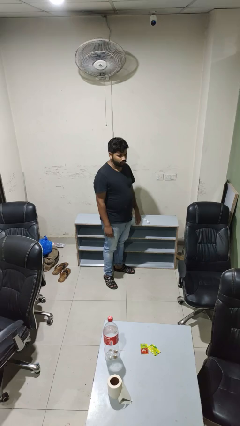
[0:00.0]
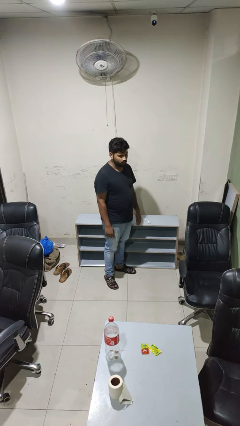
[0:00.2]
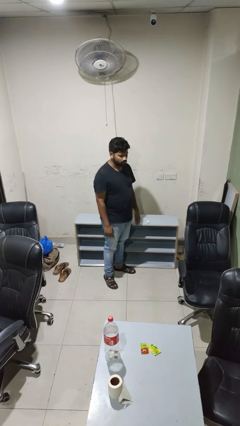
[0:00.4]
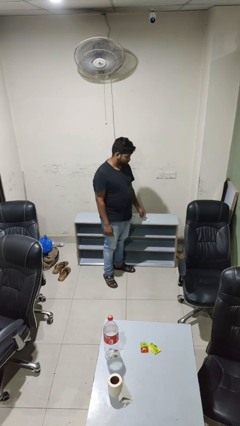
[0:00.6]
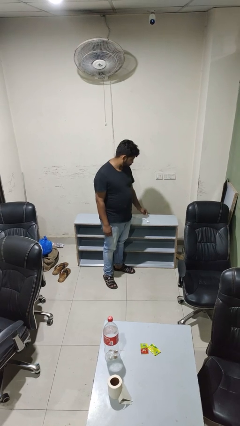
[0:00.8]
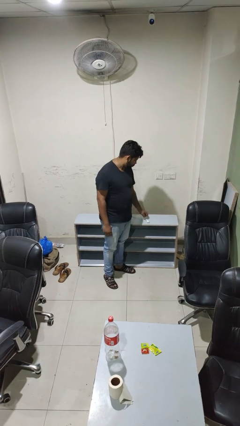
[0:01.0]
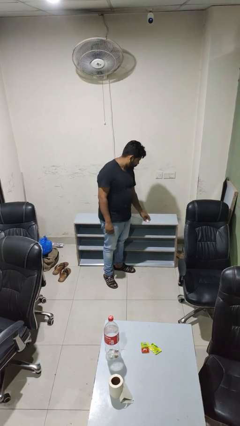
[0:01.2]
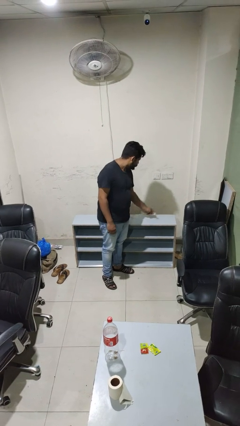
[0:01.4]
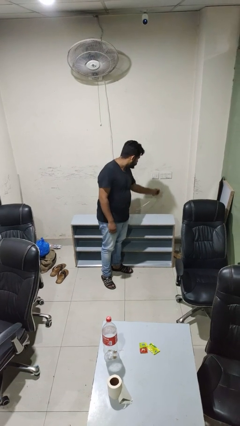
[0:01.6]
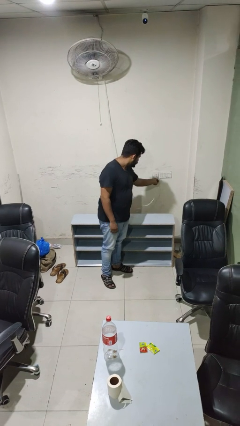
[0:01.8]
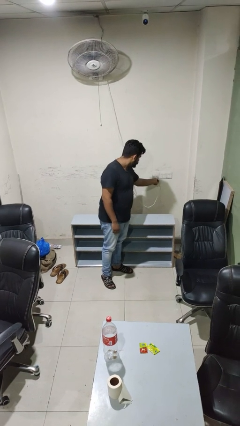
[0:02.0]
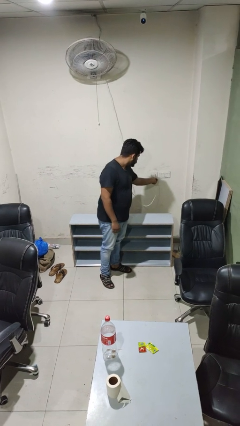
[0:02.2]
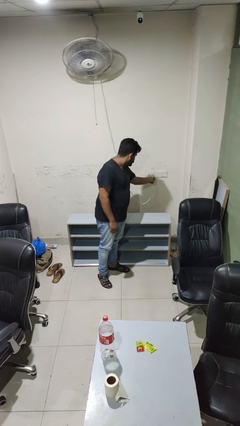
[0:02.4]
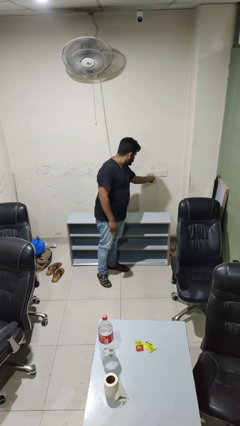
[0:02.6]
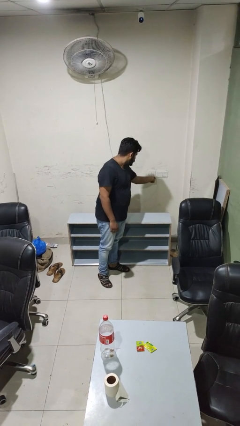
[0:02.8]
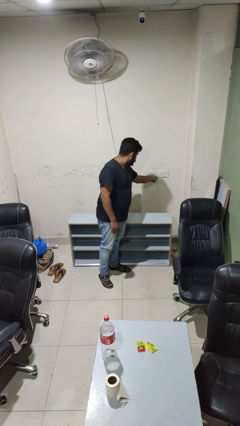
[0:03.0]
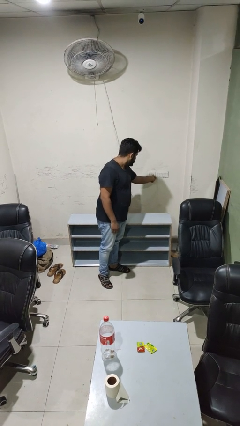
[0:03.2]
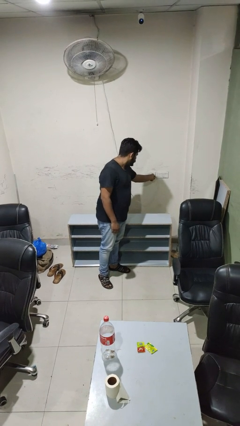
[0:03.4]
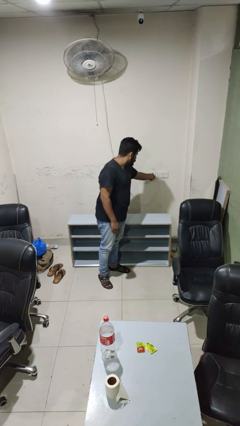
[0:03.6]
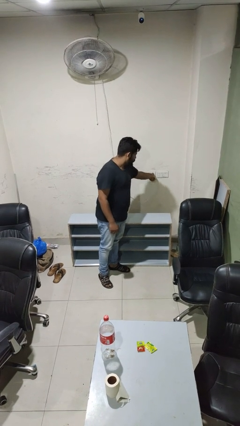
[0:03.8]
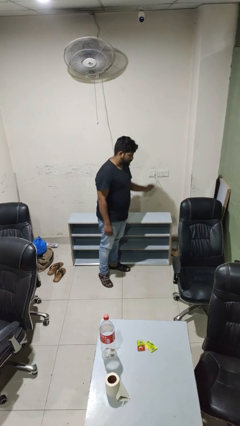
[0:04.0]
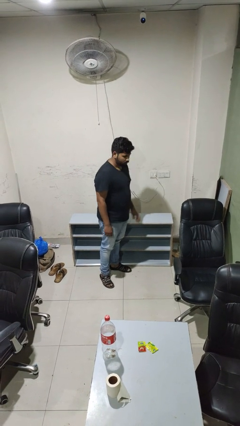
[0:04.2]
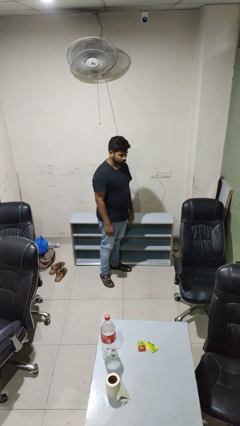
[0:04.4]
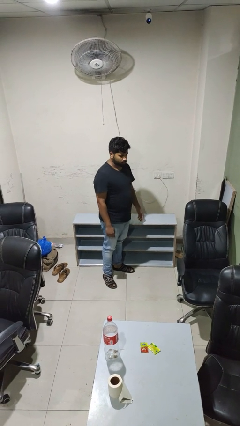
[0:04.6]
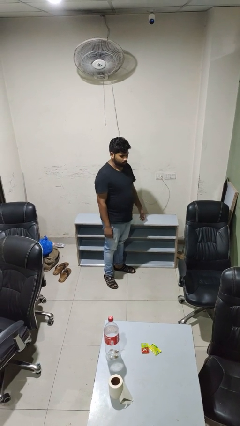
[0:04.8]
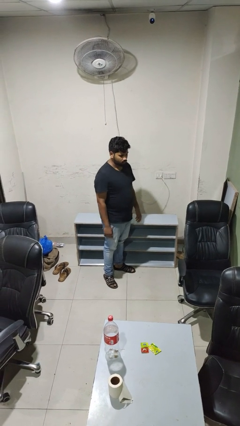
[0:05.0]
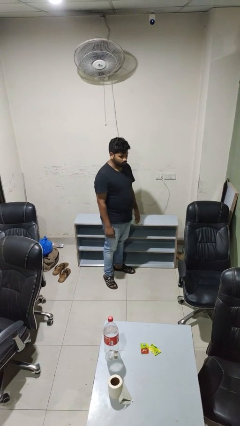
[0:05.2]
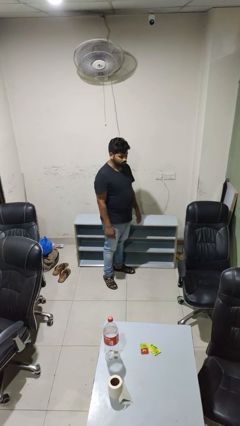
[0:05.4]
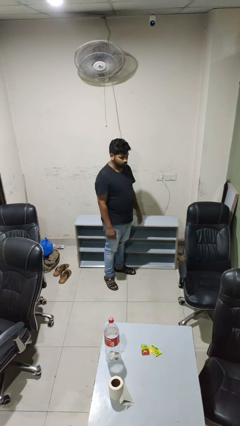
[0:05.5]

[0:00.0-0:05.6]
person plugs into electrical socket

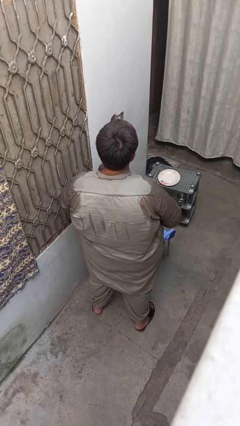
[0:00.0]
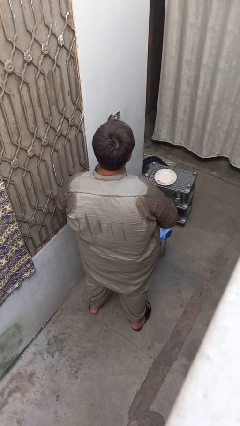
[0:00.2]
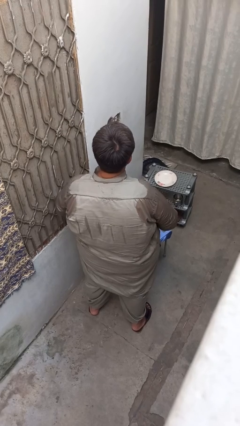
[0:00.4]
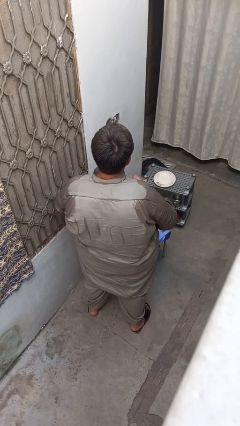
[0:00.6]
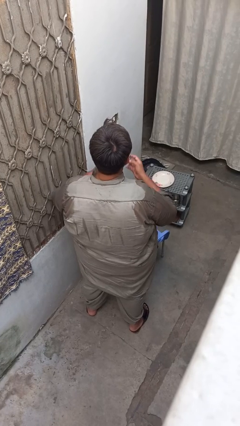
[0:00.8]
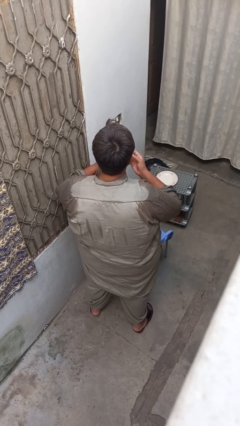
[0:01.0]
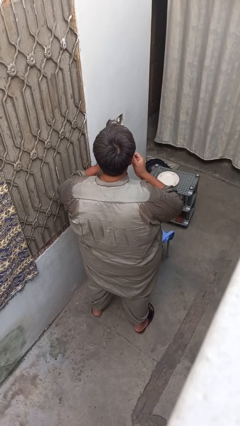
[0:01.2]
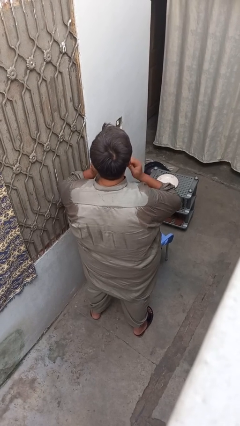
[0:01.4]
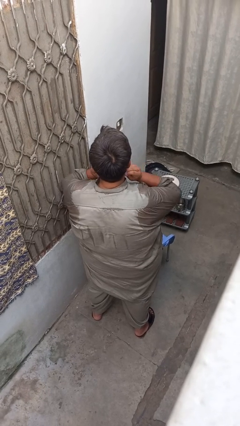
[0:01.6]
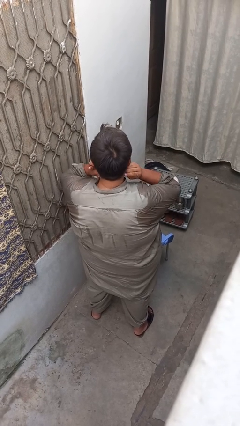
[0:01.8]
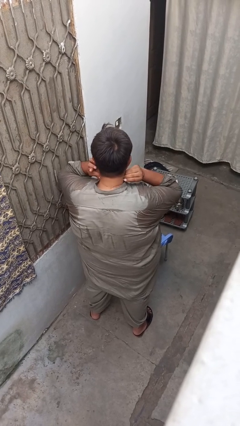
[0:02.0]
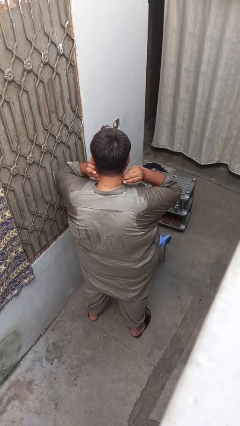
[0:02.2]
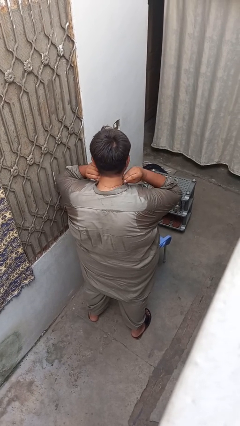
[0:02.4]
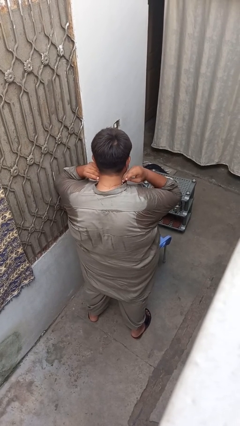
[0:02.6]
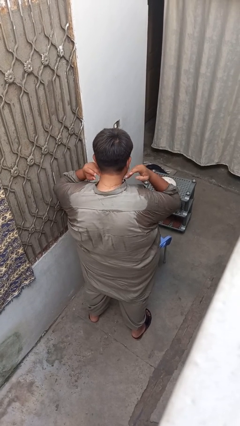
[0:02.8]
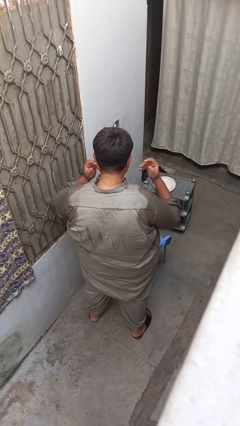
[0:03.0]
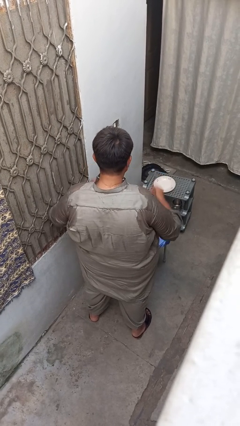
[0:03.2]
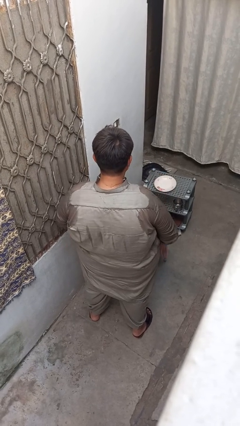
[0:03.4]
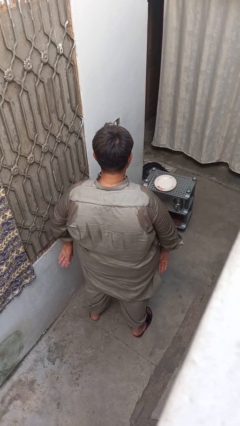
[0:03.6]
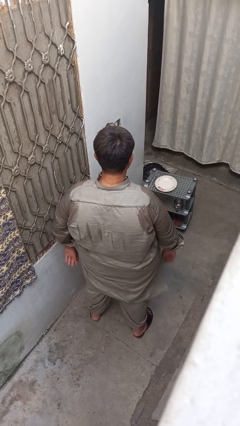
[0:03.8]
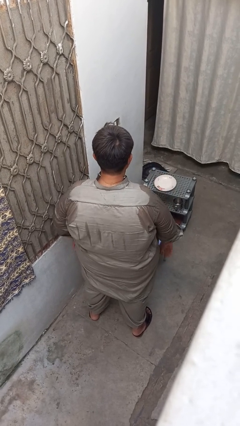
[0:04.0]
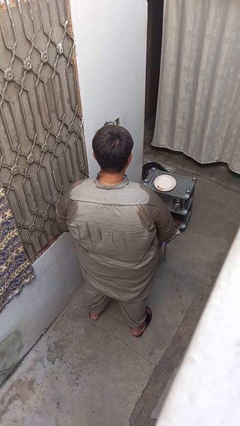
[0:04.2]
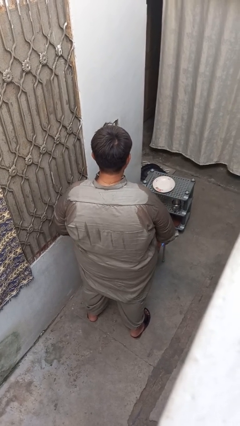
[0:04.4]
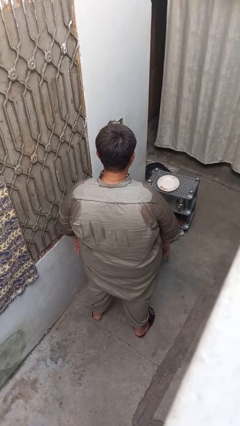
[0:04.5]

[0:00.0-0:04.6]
person puts on necklace

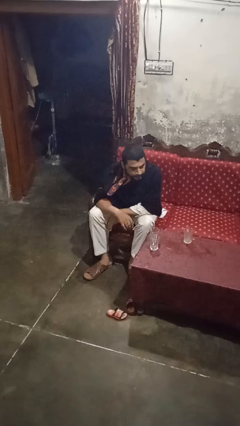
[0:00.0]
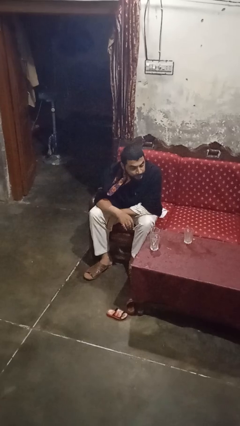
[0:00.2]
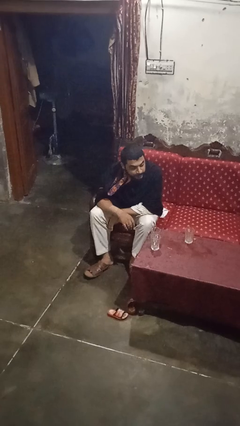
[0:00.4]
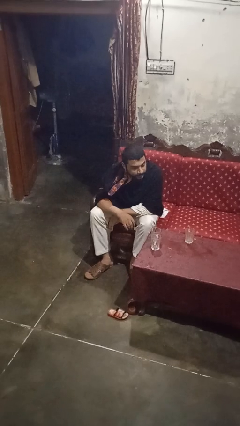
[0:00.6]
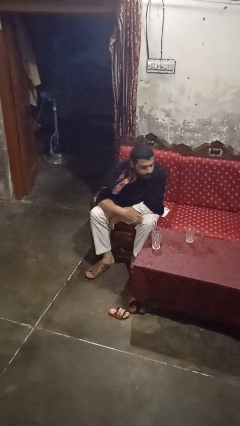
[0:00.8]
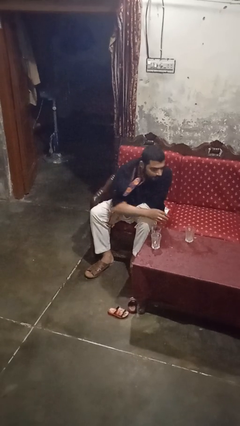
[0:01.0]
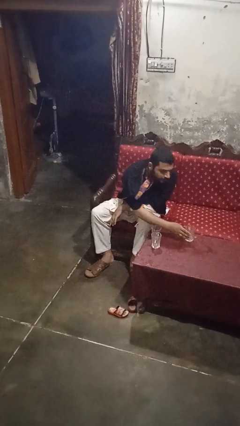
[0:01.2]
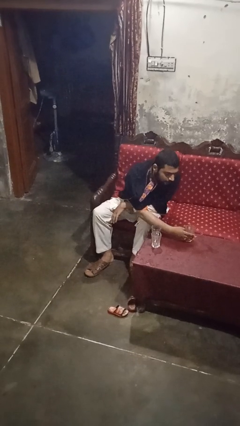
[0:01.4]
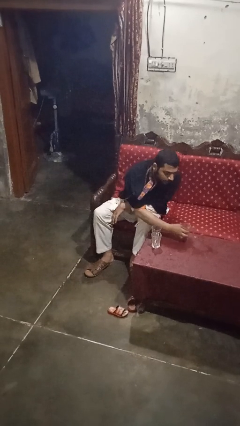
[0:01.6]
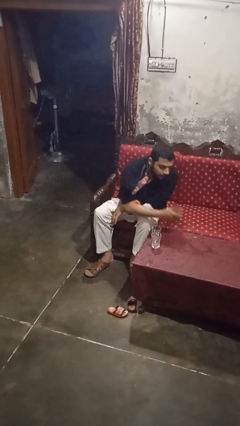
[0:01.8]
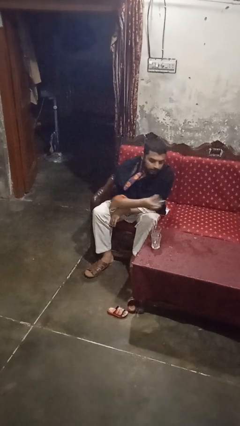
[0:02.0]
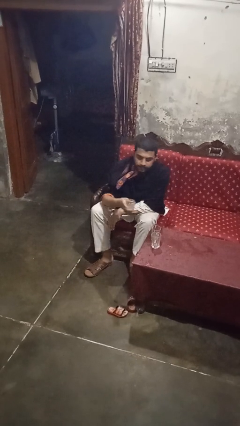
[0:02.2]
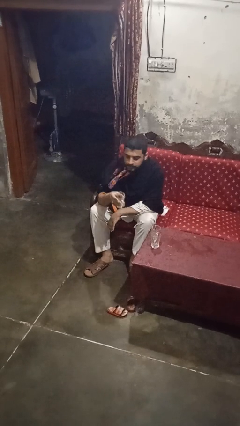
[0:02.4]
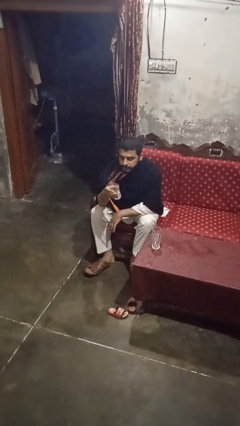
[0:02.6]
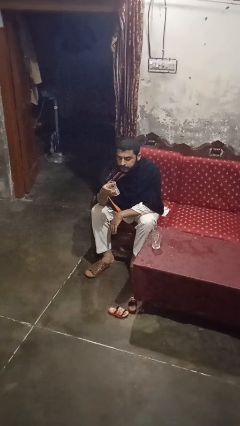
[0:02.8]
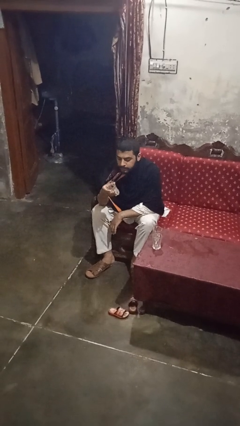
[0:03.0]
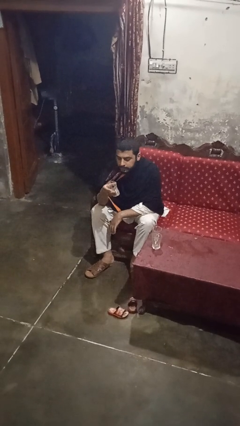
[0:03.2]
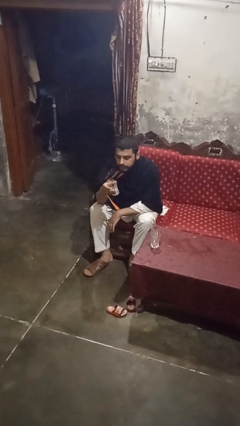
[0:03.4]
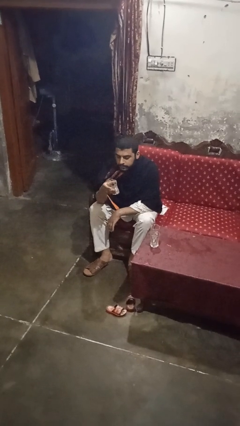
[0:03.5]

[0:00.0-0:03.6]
person picks up object from table

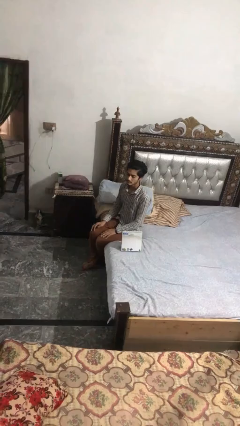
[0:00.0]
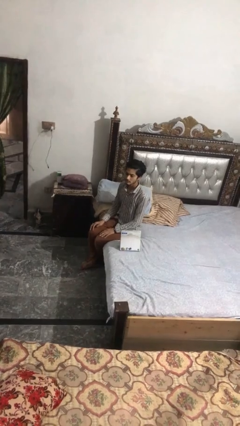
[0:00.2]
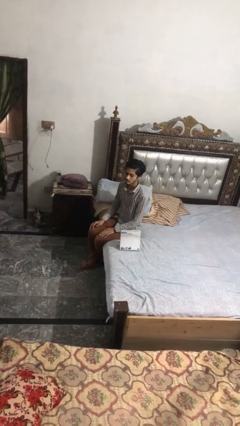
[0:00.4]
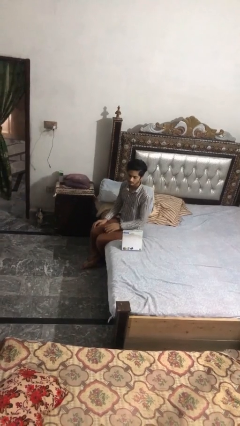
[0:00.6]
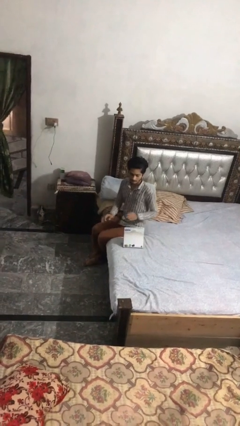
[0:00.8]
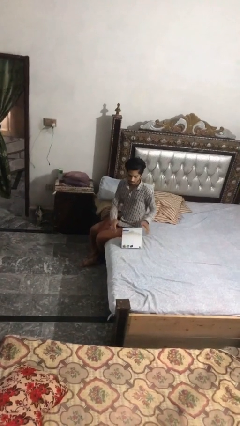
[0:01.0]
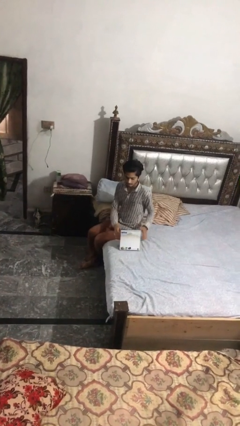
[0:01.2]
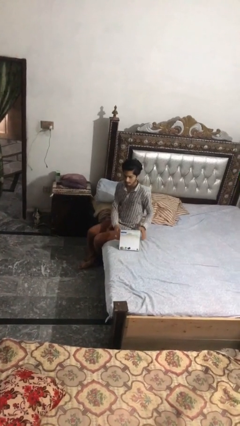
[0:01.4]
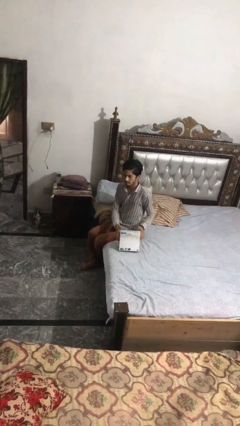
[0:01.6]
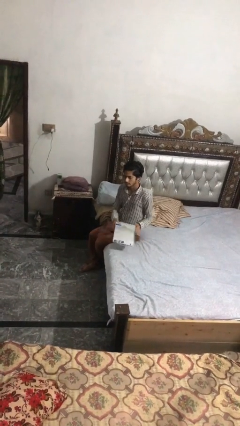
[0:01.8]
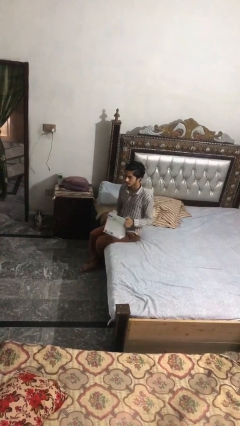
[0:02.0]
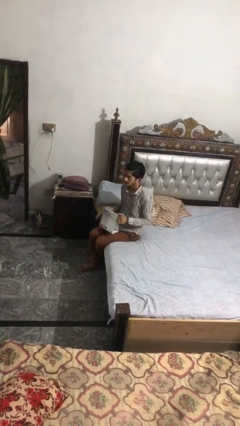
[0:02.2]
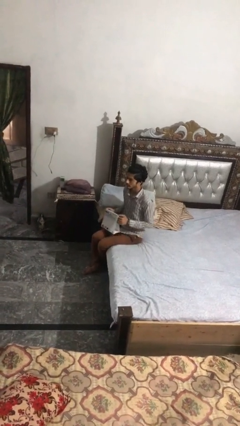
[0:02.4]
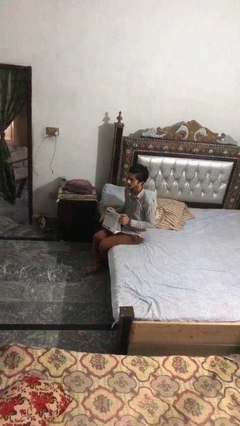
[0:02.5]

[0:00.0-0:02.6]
person picks up object from bed

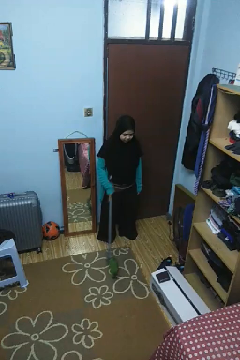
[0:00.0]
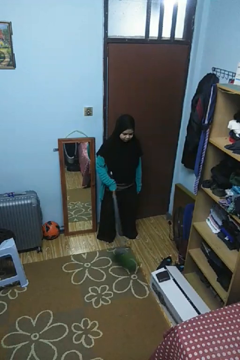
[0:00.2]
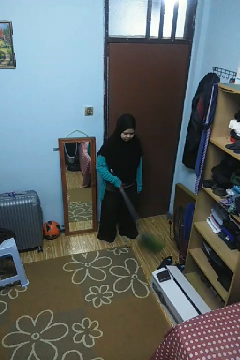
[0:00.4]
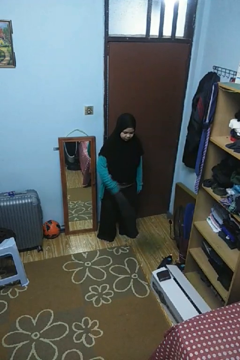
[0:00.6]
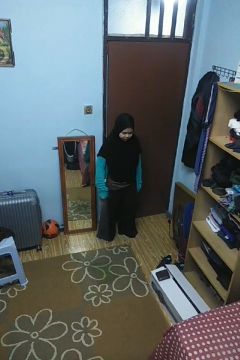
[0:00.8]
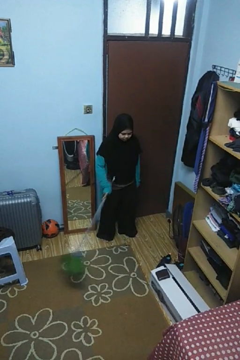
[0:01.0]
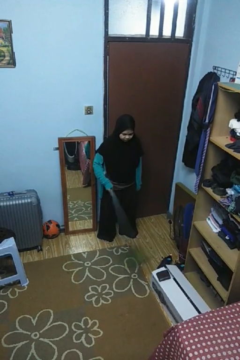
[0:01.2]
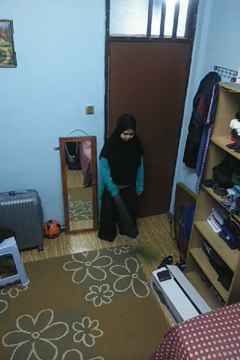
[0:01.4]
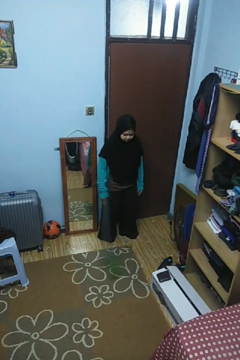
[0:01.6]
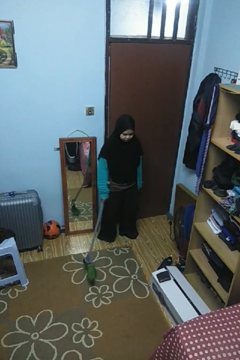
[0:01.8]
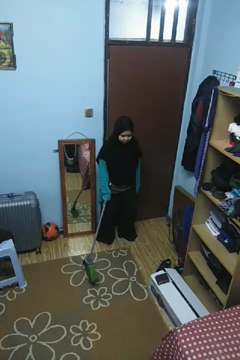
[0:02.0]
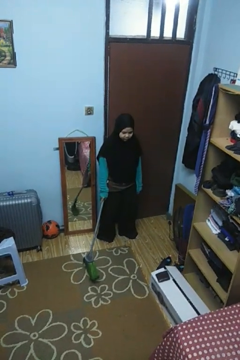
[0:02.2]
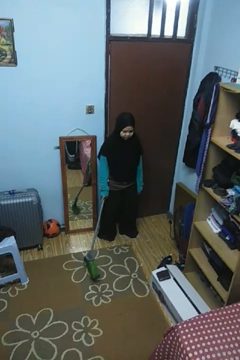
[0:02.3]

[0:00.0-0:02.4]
person sweeps floor
